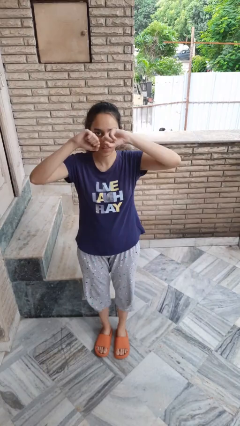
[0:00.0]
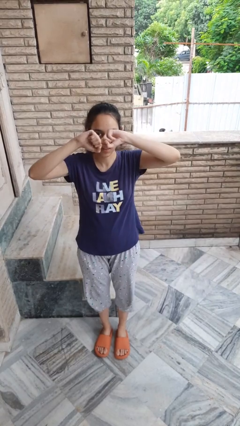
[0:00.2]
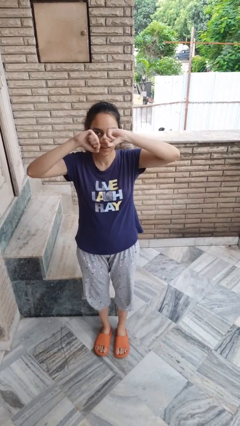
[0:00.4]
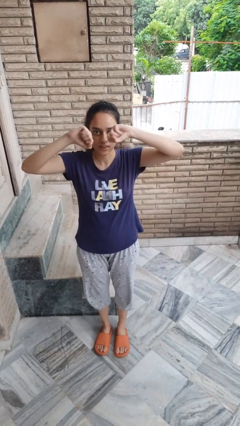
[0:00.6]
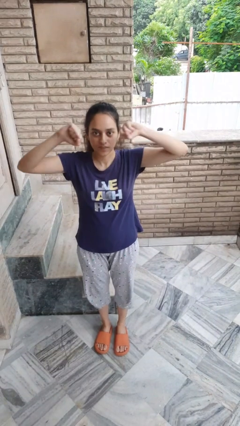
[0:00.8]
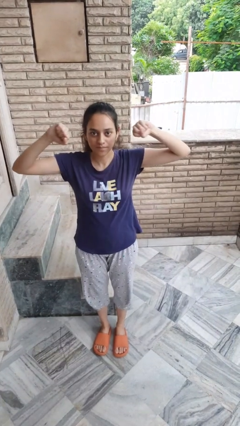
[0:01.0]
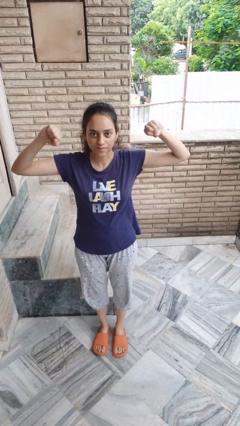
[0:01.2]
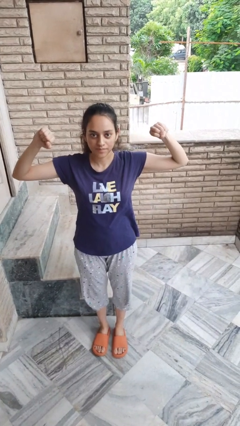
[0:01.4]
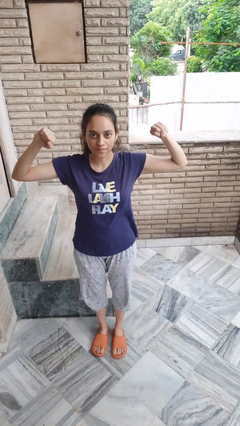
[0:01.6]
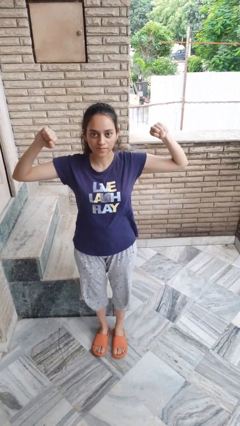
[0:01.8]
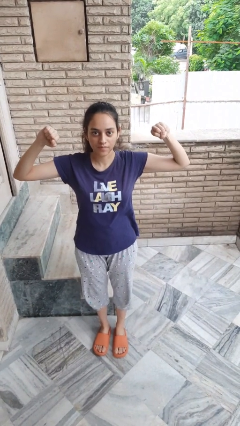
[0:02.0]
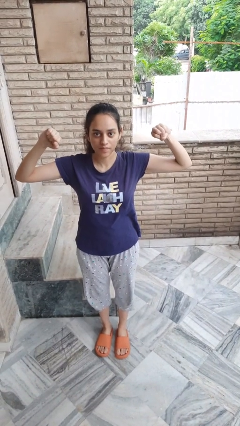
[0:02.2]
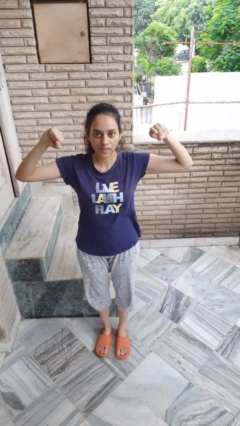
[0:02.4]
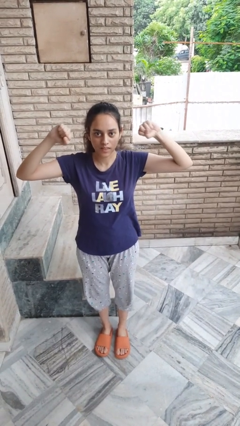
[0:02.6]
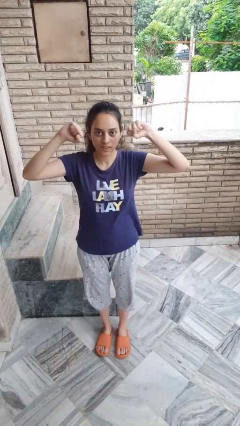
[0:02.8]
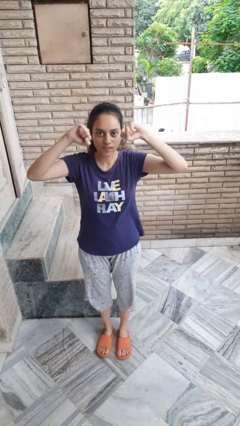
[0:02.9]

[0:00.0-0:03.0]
person gestures zoom out

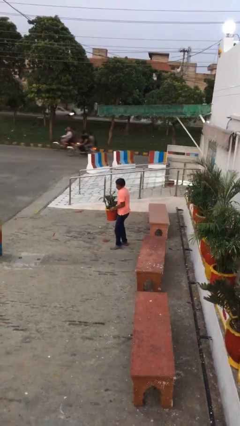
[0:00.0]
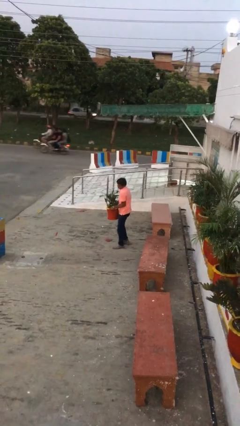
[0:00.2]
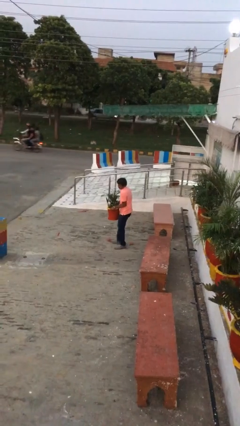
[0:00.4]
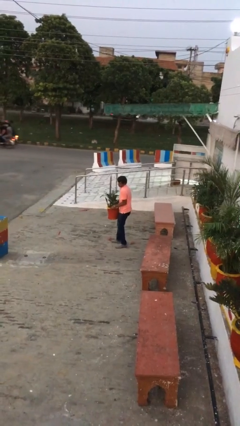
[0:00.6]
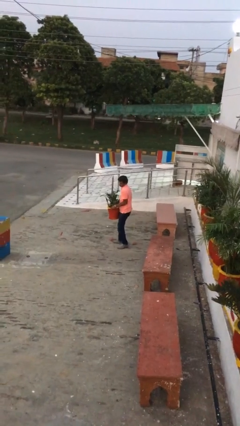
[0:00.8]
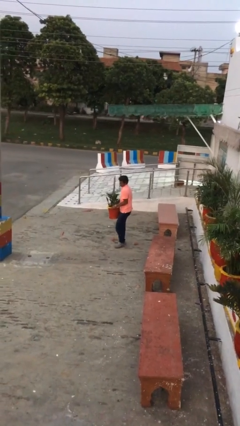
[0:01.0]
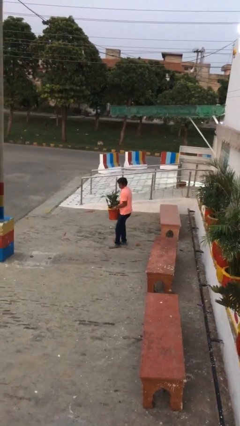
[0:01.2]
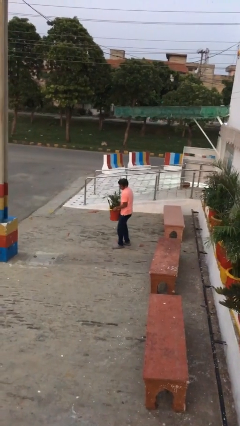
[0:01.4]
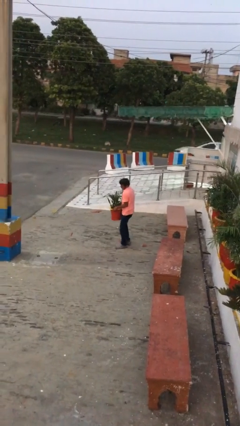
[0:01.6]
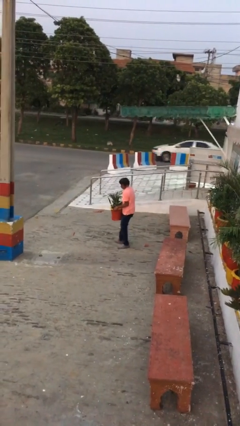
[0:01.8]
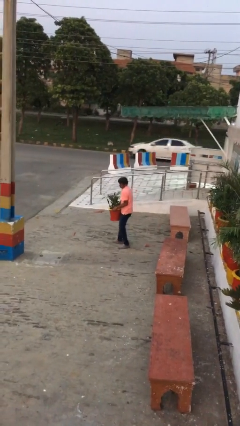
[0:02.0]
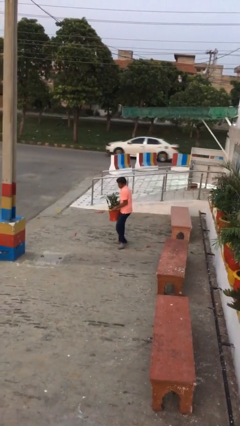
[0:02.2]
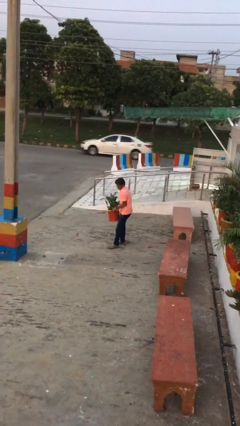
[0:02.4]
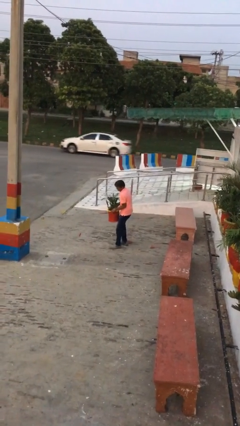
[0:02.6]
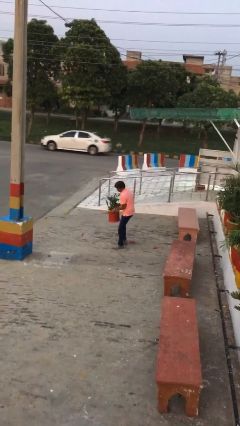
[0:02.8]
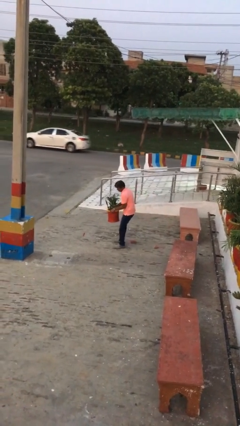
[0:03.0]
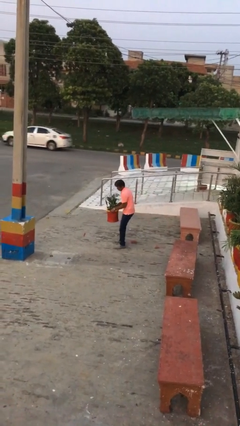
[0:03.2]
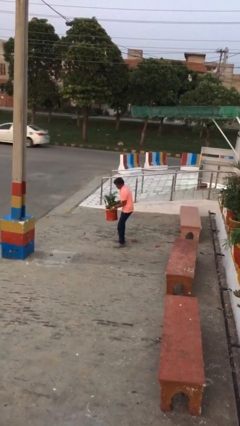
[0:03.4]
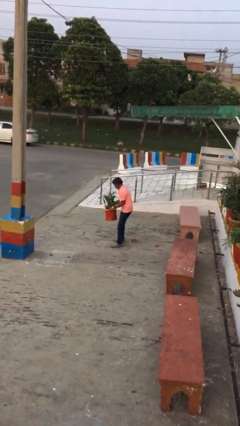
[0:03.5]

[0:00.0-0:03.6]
person carries heavy object

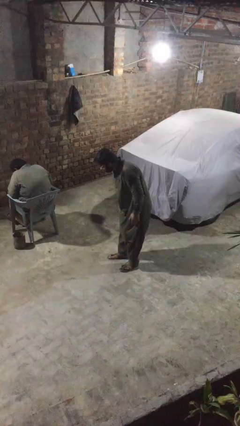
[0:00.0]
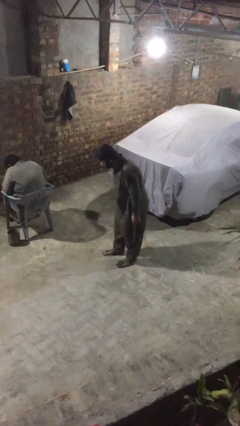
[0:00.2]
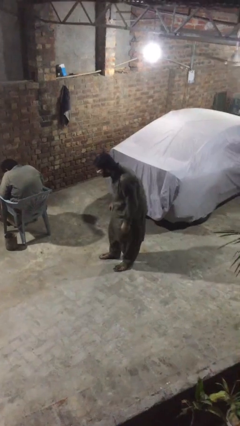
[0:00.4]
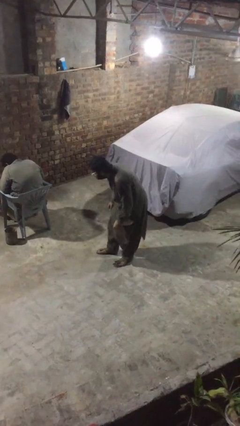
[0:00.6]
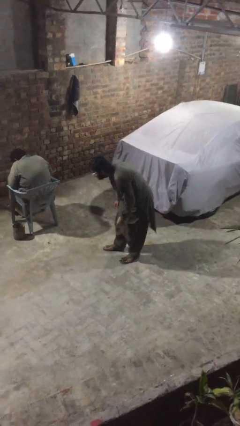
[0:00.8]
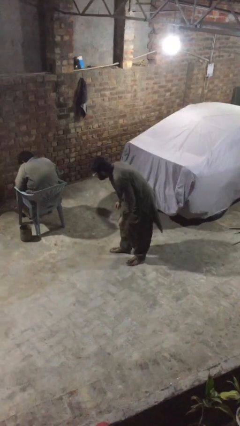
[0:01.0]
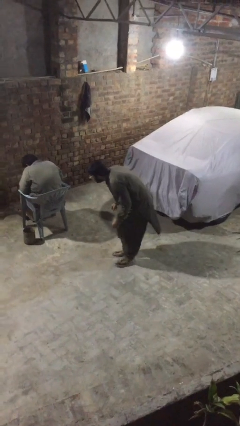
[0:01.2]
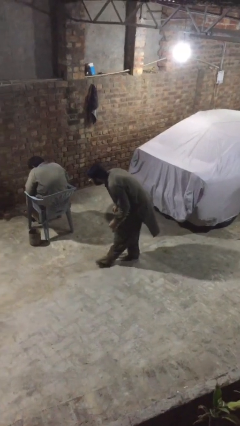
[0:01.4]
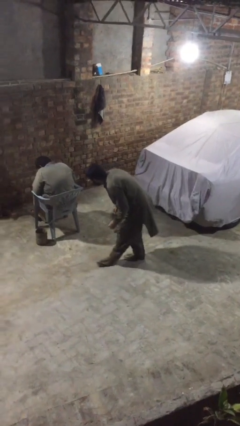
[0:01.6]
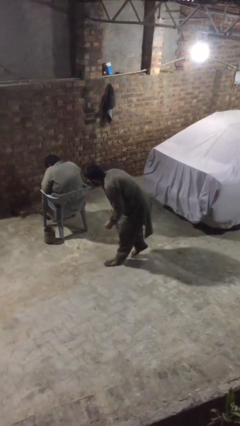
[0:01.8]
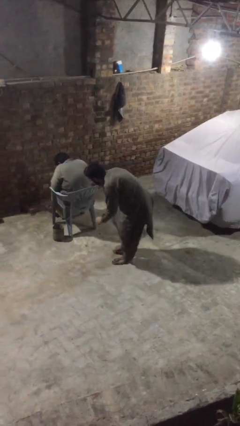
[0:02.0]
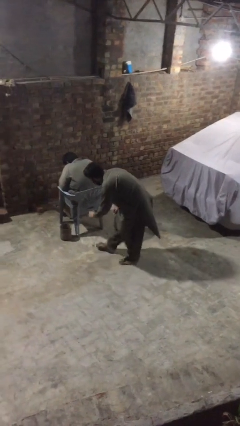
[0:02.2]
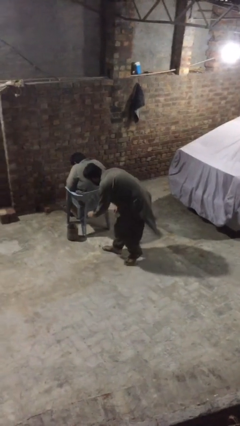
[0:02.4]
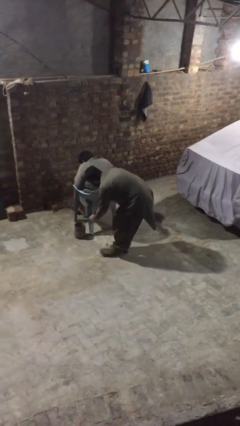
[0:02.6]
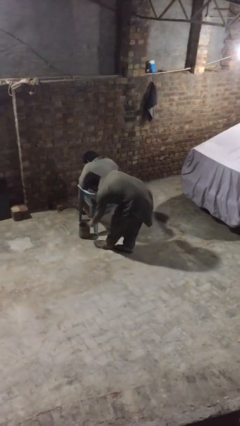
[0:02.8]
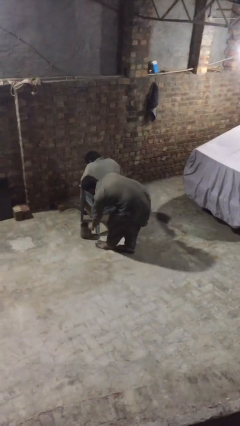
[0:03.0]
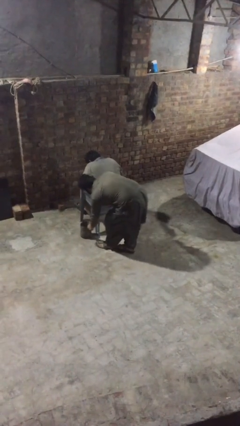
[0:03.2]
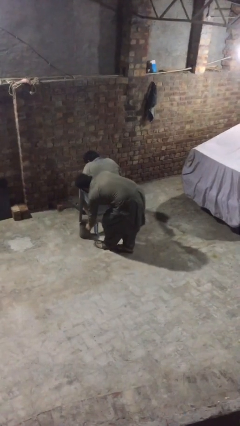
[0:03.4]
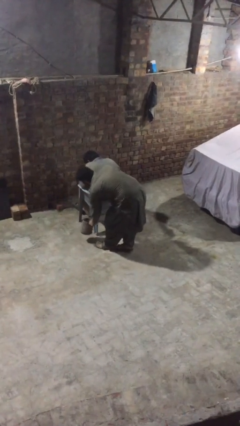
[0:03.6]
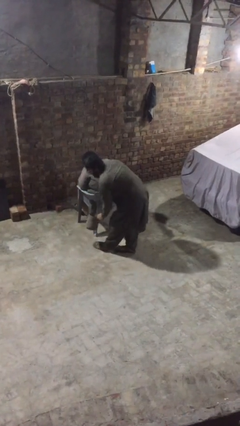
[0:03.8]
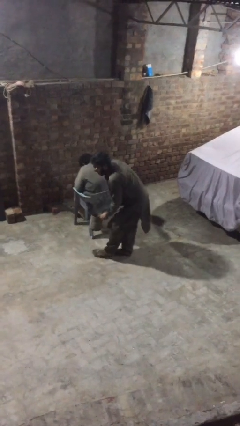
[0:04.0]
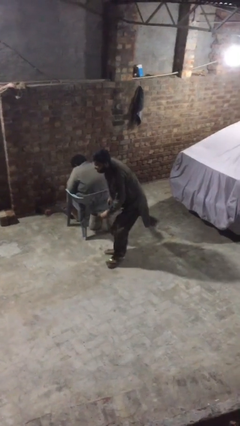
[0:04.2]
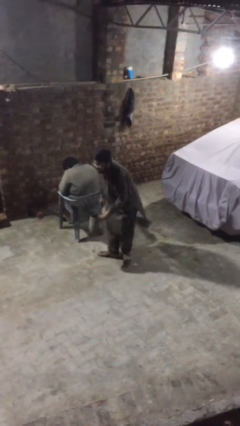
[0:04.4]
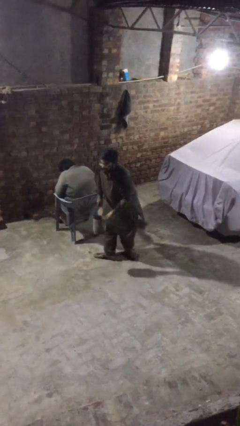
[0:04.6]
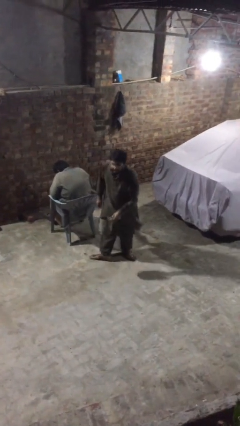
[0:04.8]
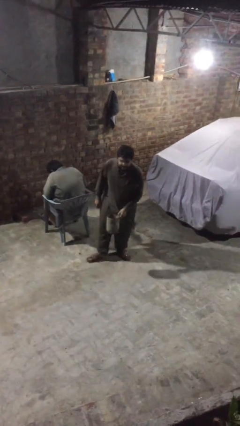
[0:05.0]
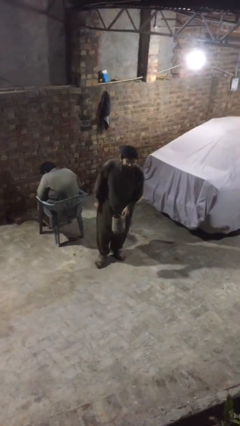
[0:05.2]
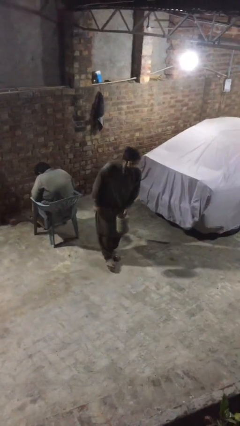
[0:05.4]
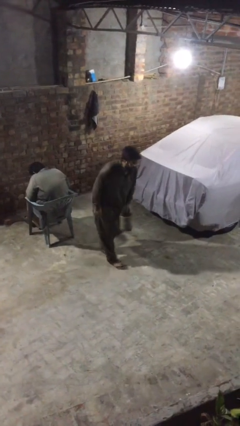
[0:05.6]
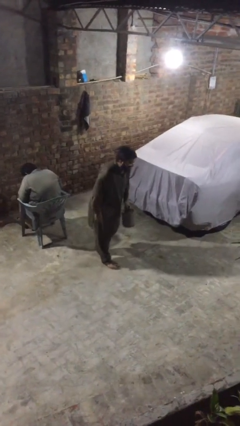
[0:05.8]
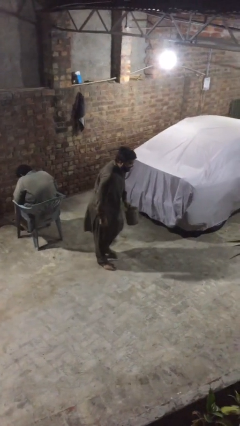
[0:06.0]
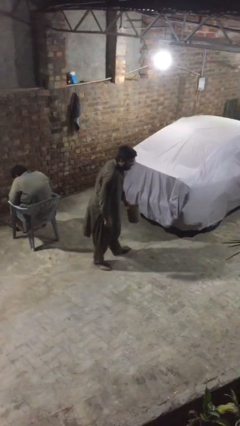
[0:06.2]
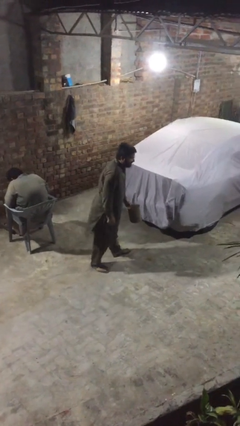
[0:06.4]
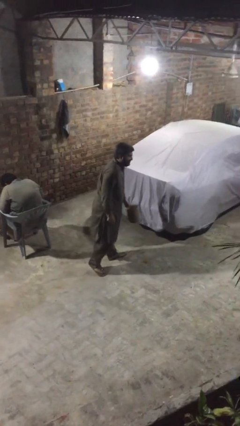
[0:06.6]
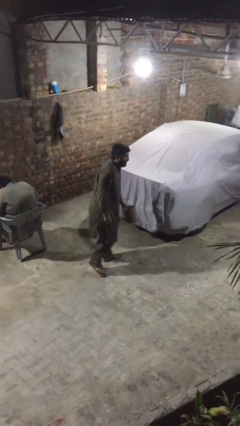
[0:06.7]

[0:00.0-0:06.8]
person steals object from person

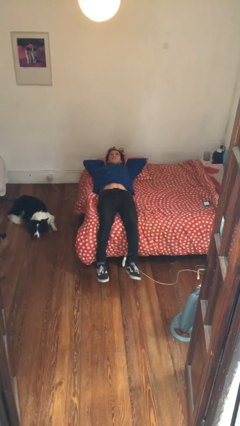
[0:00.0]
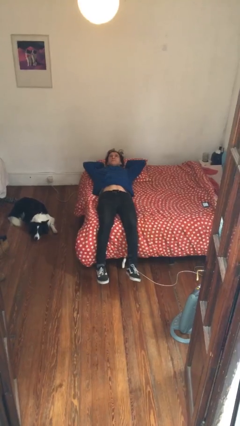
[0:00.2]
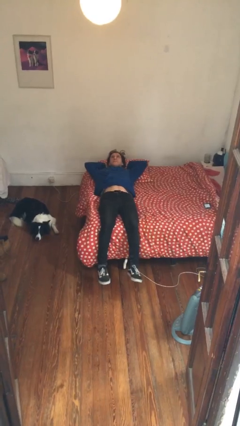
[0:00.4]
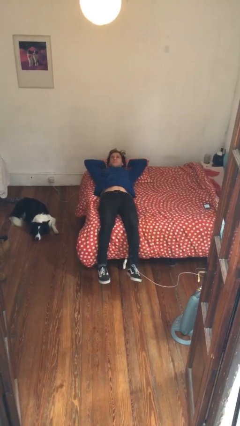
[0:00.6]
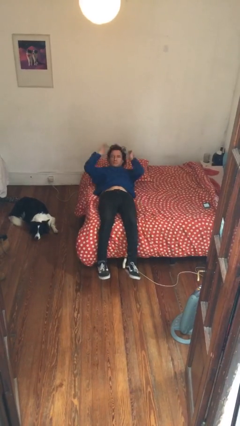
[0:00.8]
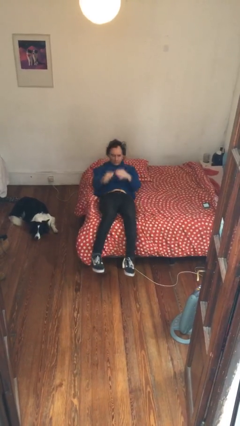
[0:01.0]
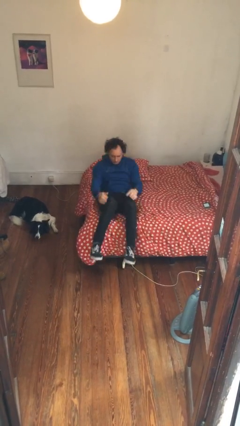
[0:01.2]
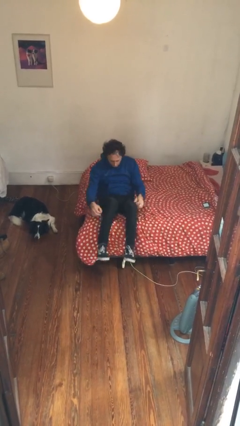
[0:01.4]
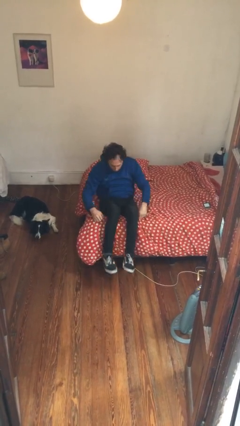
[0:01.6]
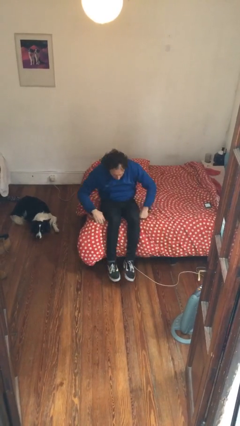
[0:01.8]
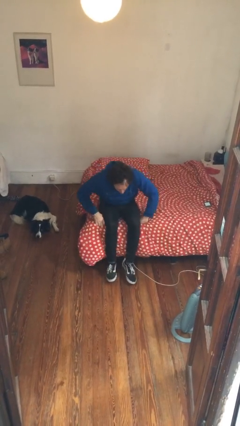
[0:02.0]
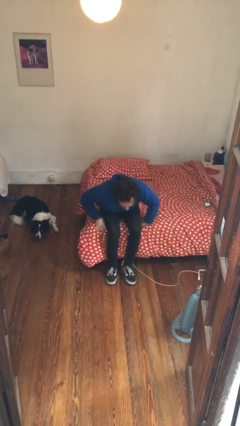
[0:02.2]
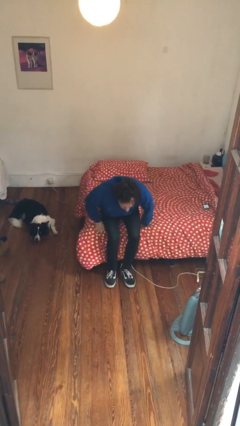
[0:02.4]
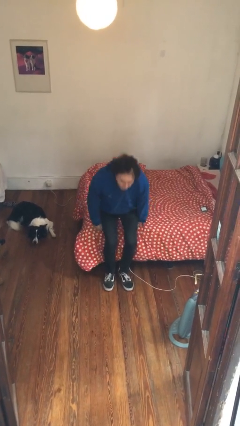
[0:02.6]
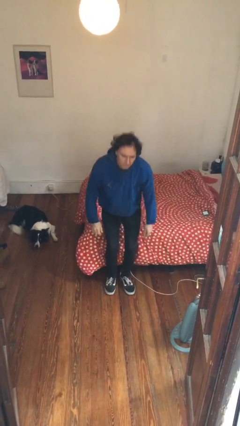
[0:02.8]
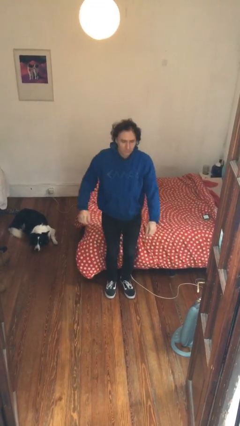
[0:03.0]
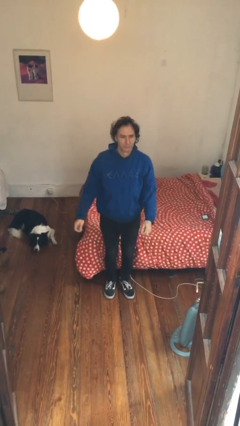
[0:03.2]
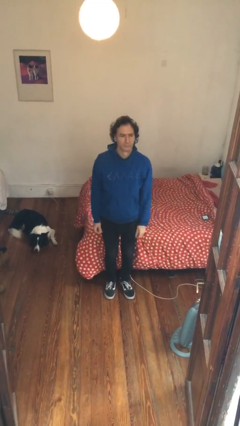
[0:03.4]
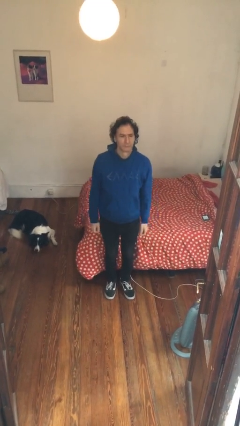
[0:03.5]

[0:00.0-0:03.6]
person stands up

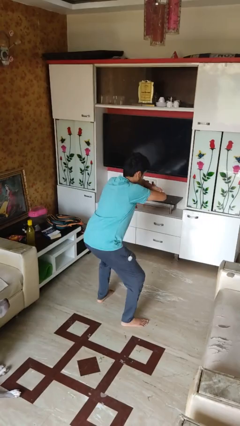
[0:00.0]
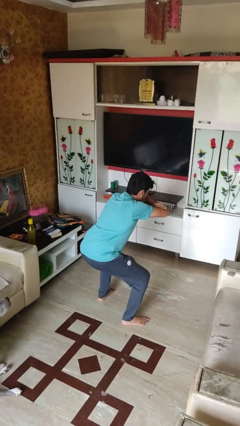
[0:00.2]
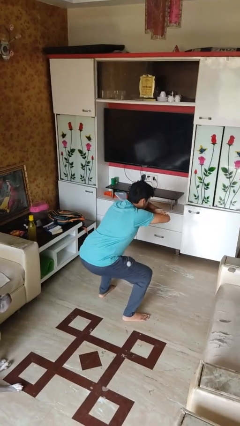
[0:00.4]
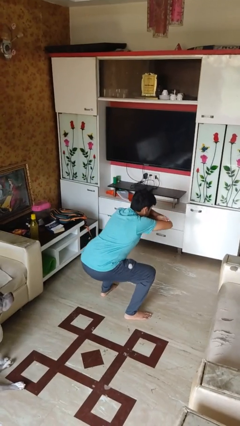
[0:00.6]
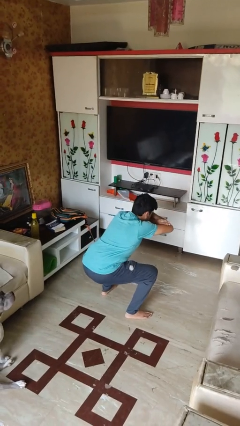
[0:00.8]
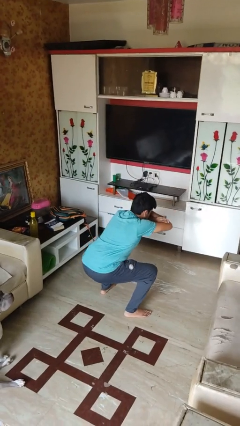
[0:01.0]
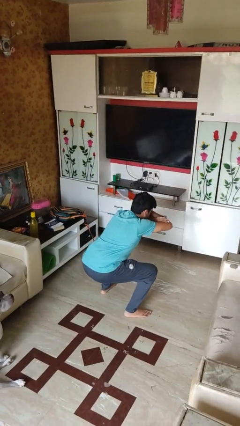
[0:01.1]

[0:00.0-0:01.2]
person squats
